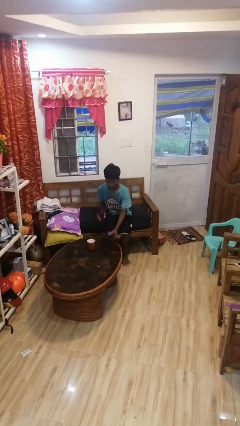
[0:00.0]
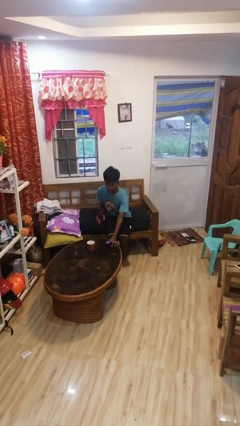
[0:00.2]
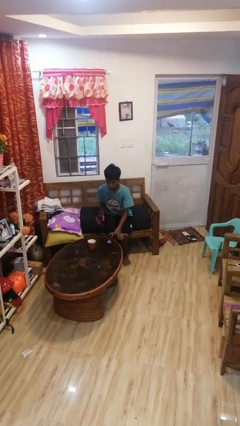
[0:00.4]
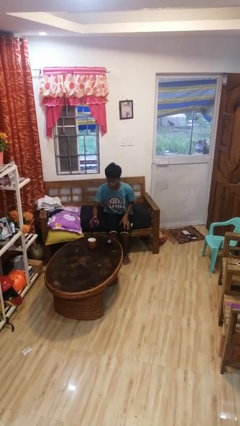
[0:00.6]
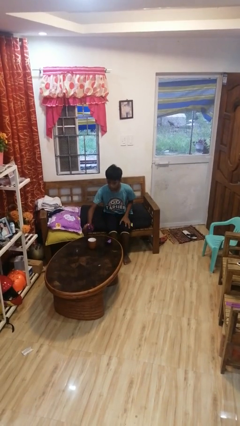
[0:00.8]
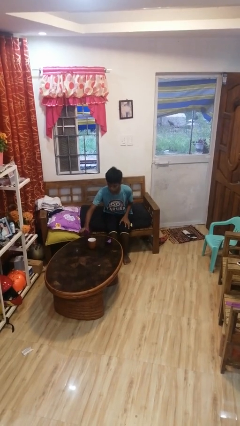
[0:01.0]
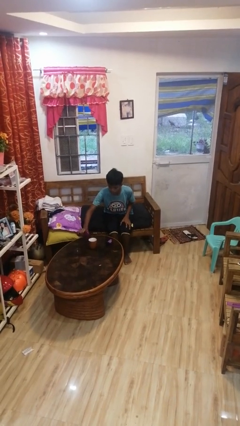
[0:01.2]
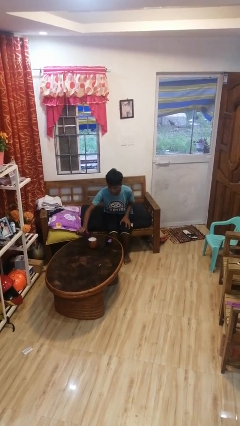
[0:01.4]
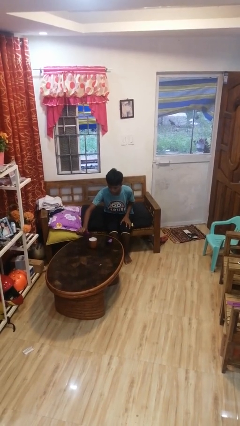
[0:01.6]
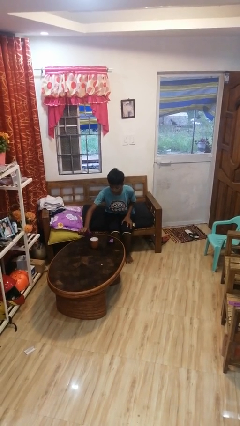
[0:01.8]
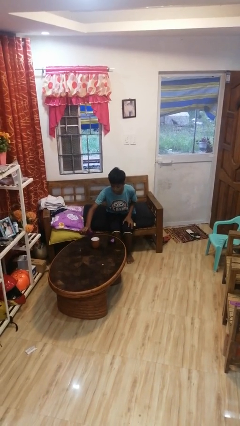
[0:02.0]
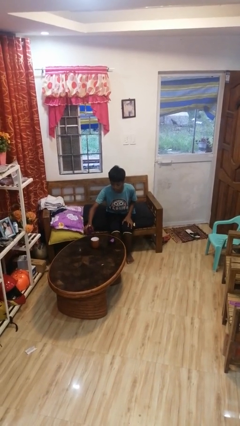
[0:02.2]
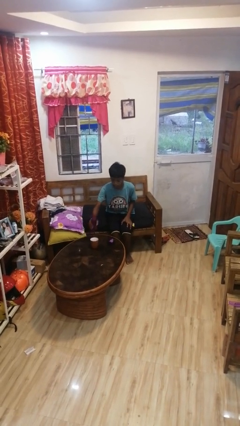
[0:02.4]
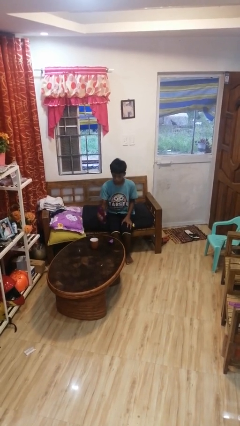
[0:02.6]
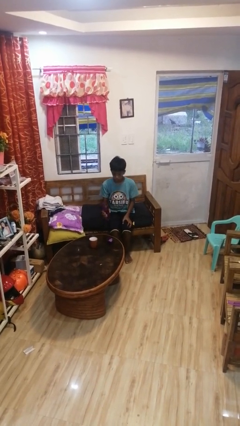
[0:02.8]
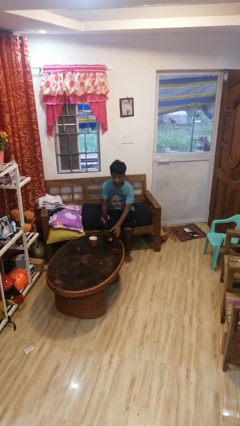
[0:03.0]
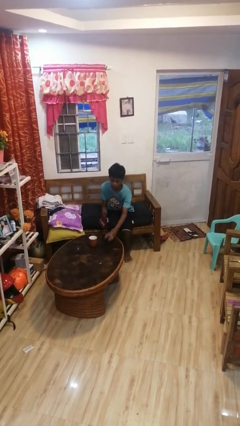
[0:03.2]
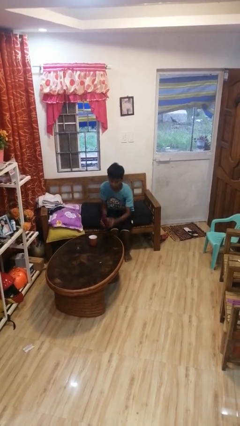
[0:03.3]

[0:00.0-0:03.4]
person pours liquid into cup

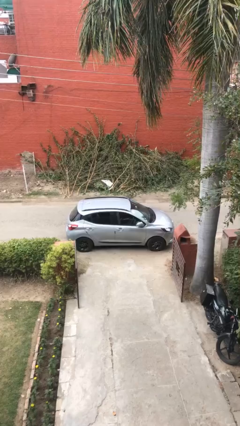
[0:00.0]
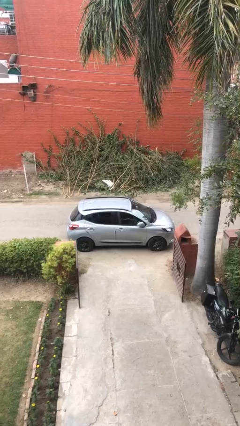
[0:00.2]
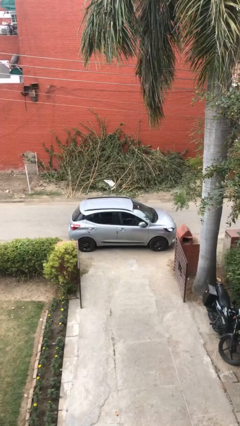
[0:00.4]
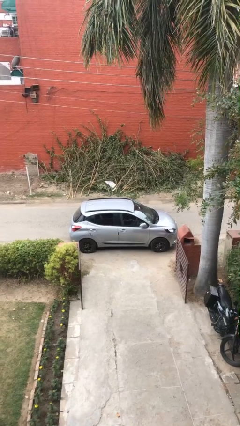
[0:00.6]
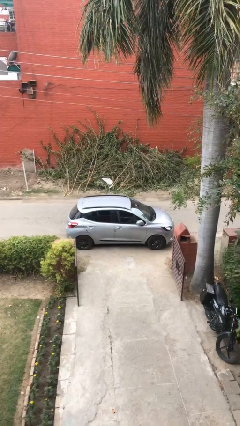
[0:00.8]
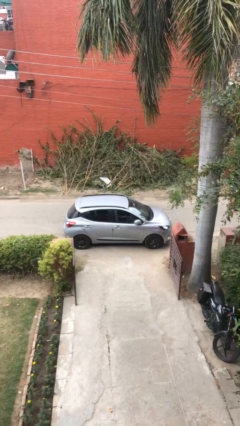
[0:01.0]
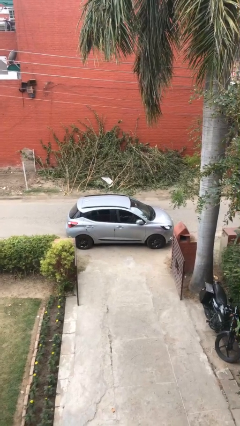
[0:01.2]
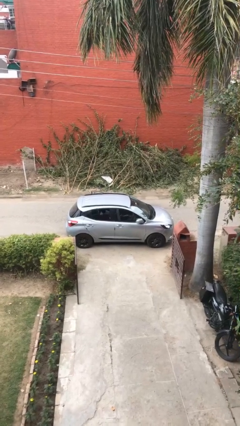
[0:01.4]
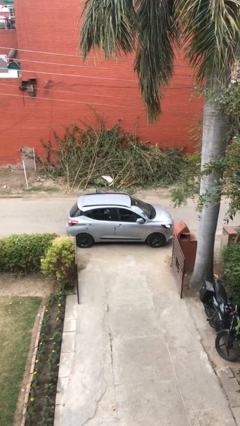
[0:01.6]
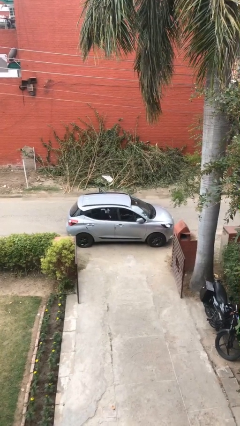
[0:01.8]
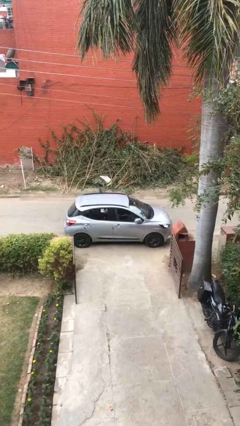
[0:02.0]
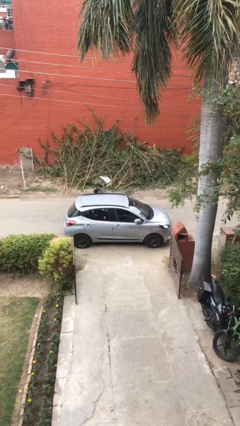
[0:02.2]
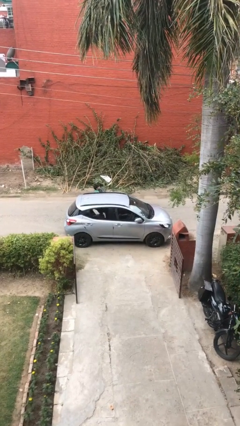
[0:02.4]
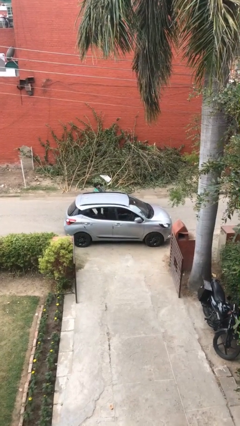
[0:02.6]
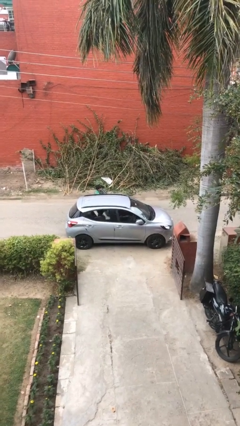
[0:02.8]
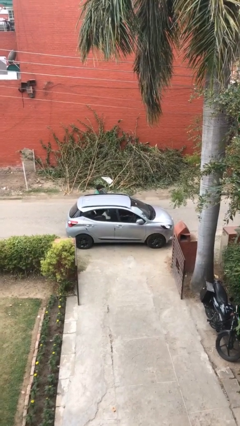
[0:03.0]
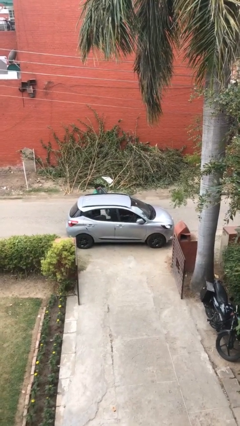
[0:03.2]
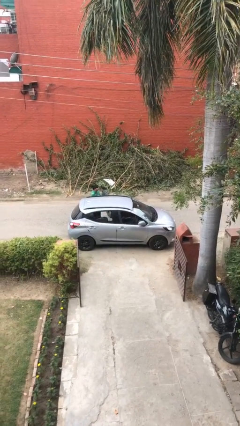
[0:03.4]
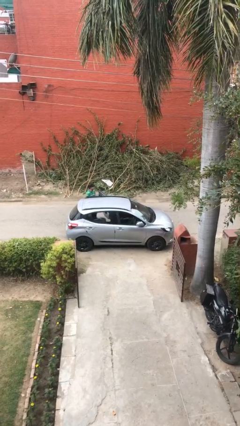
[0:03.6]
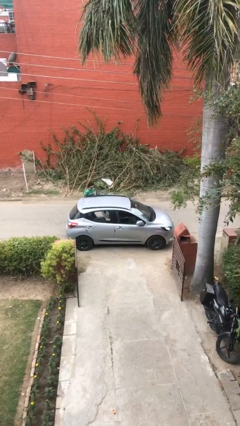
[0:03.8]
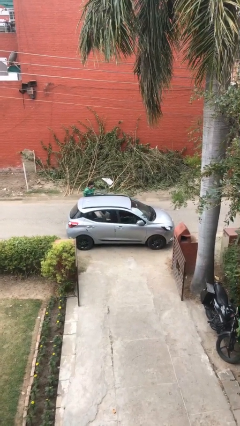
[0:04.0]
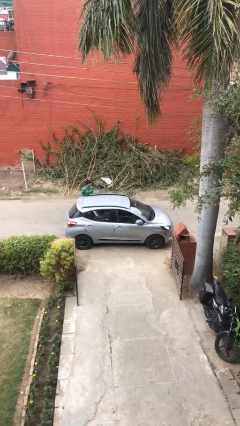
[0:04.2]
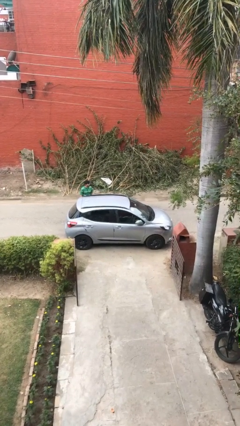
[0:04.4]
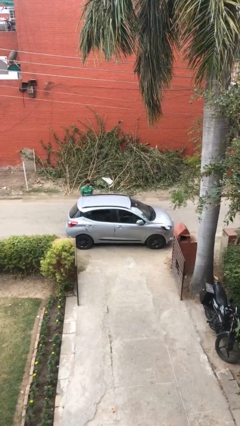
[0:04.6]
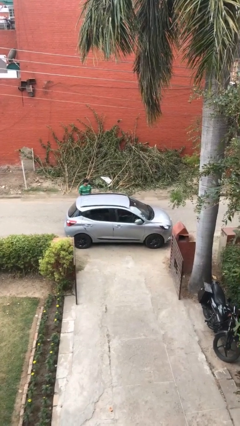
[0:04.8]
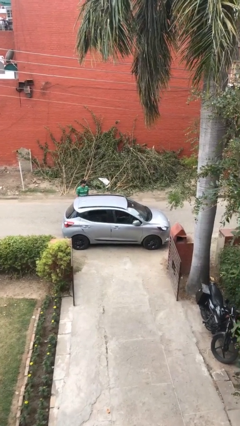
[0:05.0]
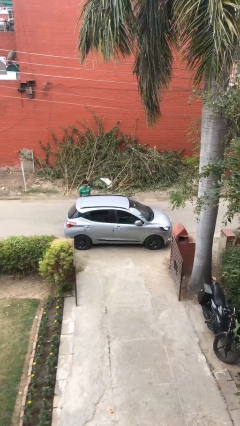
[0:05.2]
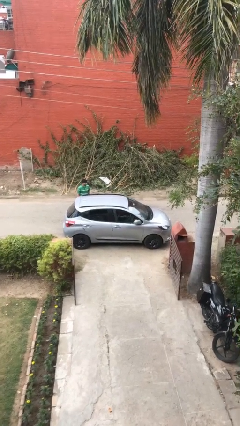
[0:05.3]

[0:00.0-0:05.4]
car drops off person

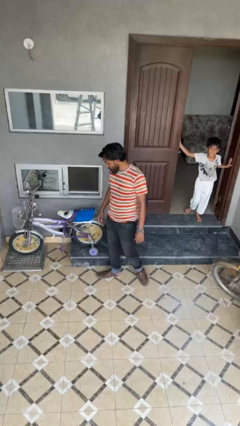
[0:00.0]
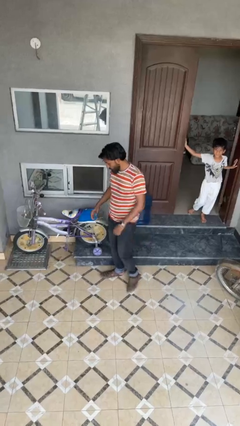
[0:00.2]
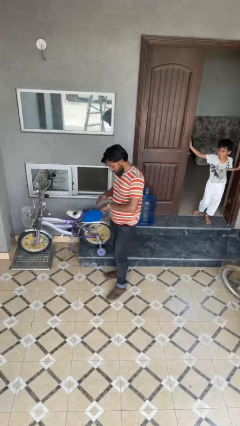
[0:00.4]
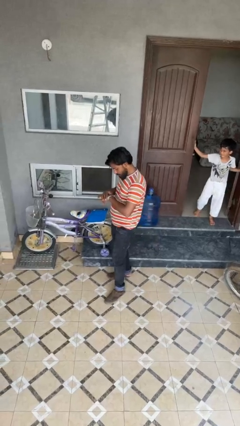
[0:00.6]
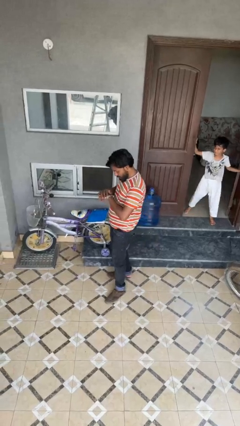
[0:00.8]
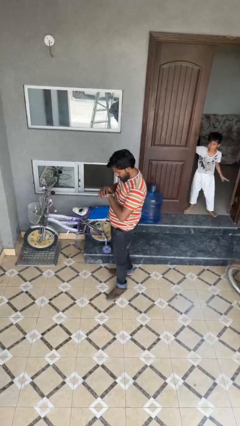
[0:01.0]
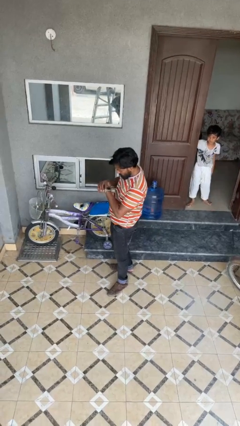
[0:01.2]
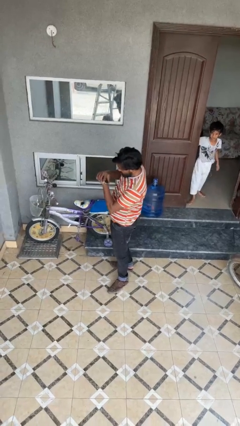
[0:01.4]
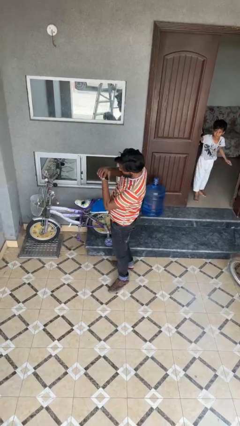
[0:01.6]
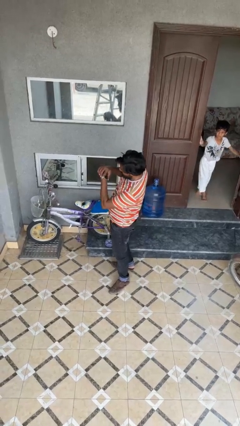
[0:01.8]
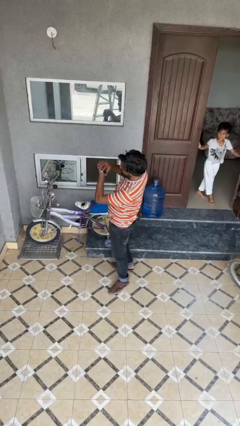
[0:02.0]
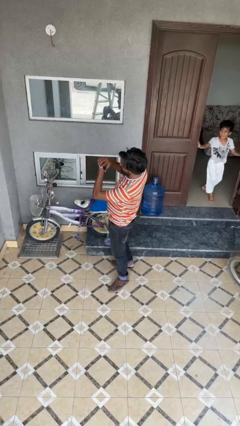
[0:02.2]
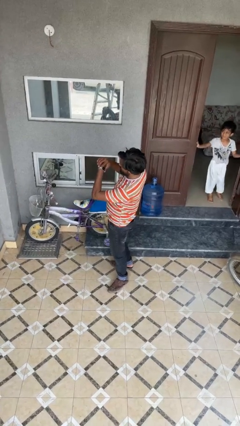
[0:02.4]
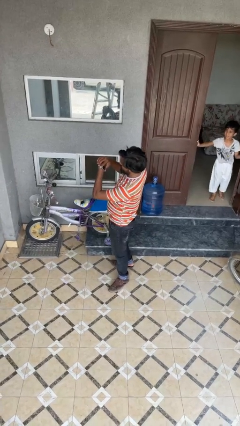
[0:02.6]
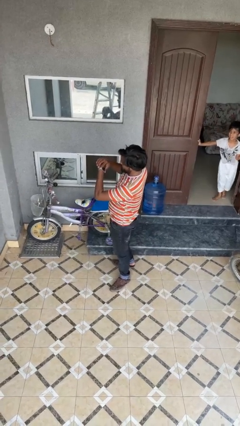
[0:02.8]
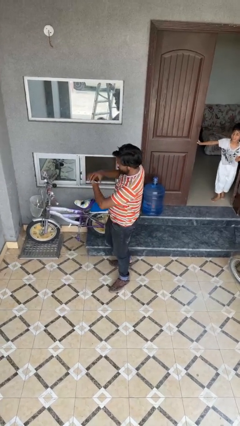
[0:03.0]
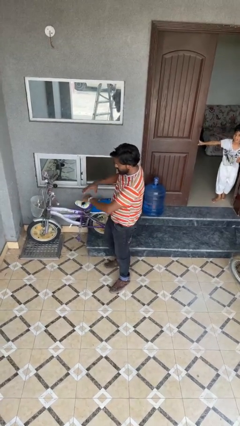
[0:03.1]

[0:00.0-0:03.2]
person looks at wristwatch

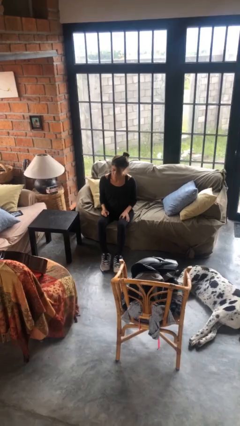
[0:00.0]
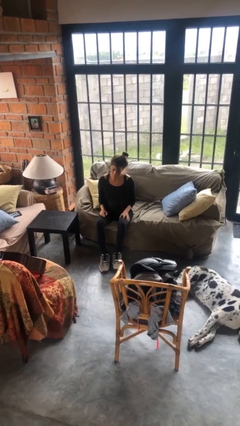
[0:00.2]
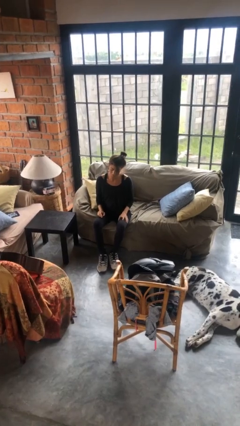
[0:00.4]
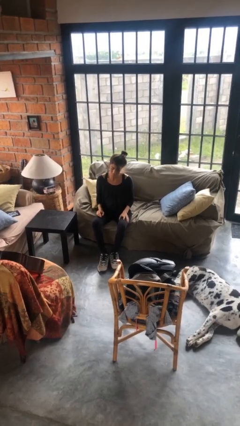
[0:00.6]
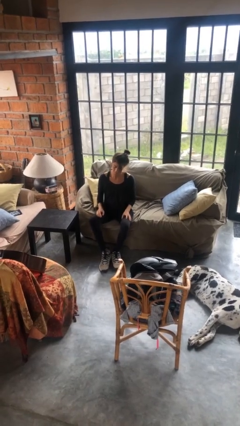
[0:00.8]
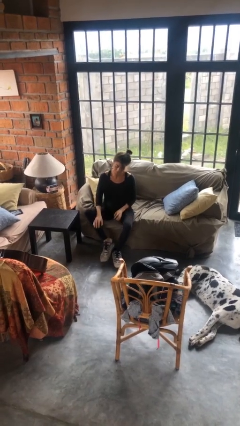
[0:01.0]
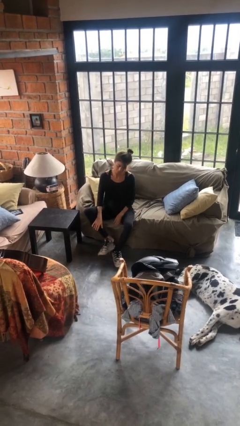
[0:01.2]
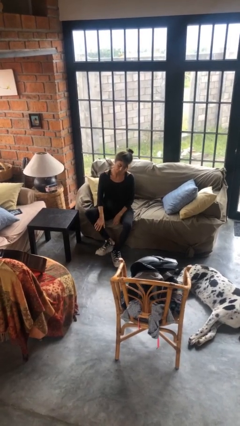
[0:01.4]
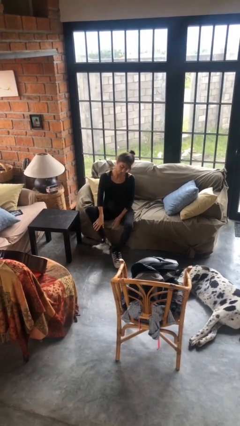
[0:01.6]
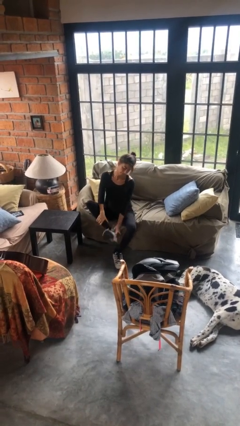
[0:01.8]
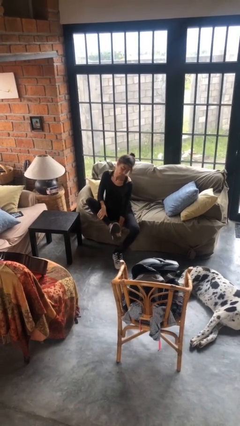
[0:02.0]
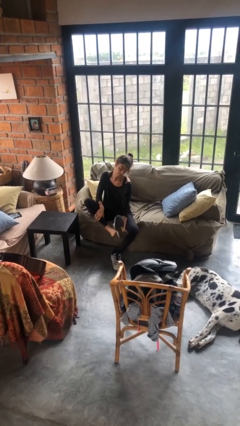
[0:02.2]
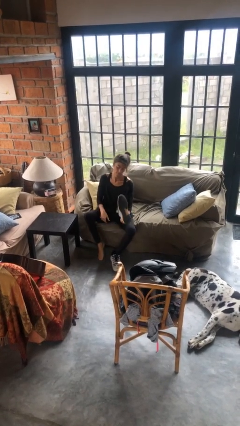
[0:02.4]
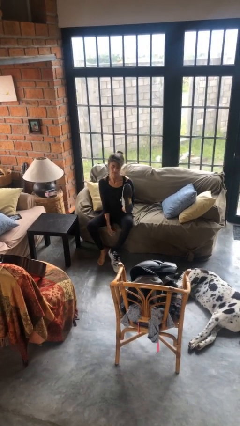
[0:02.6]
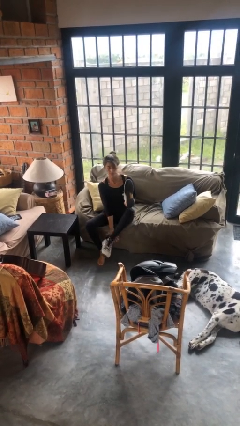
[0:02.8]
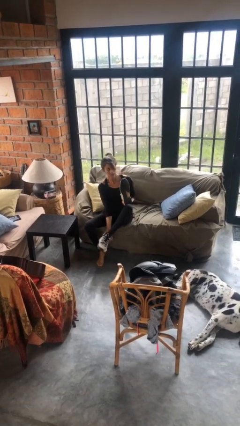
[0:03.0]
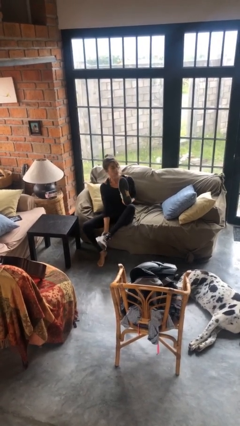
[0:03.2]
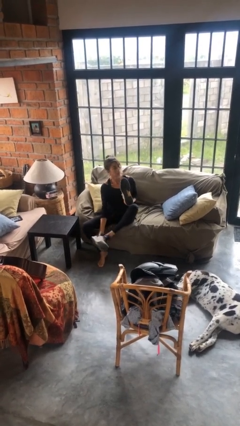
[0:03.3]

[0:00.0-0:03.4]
person takes off shoes

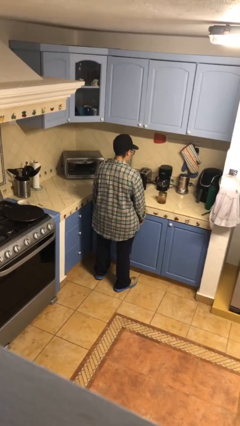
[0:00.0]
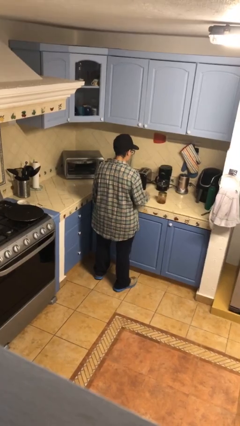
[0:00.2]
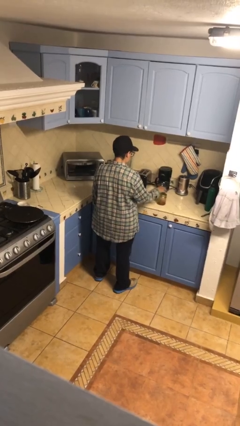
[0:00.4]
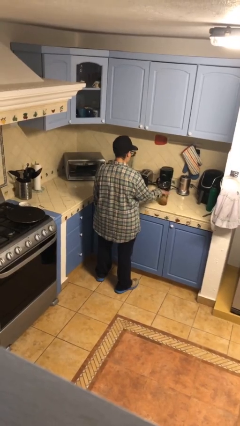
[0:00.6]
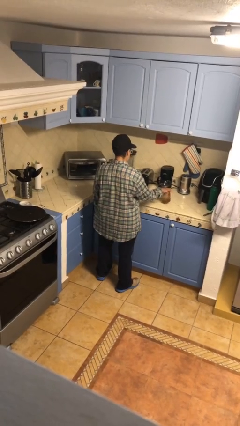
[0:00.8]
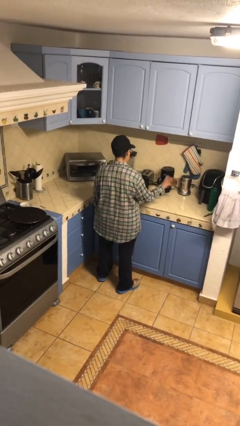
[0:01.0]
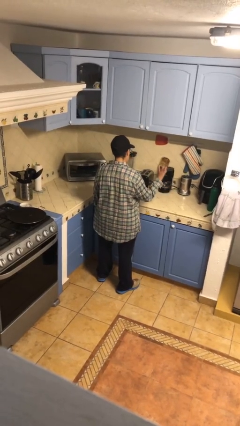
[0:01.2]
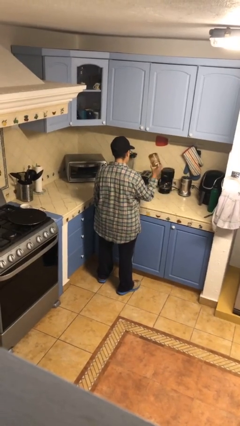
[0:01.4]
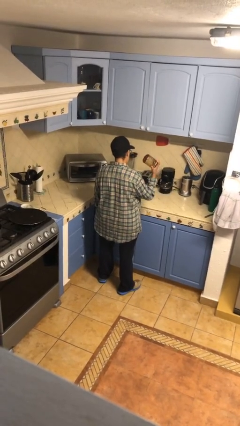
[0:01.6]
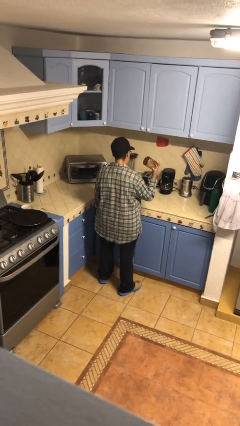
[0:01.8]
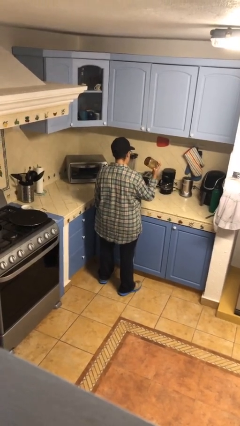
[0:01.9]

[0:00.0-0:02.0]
person picks up object from countertop
